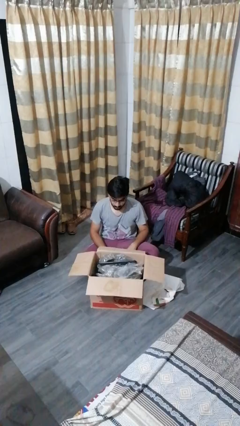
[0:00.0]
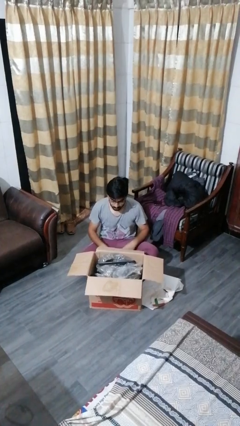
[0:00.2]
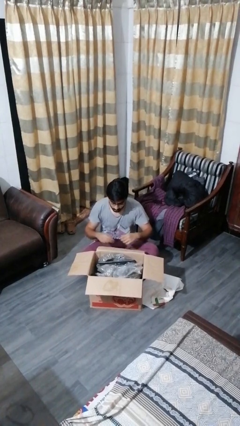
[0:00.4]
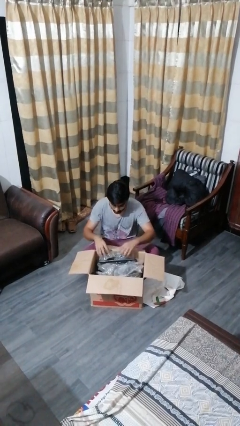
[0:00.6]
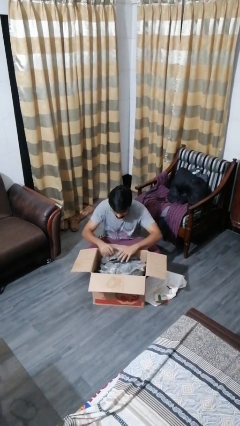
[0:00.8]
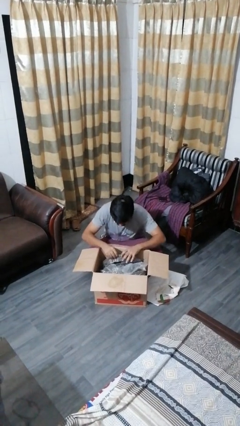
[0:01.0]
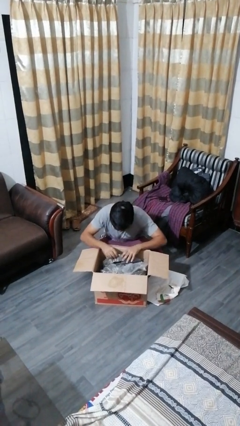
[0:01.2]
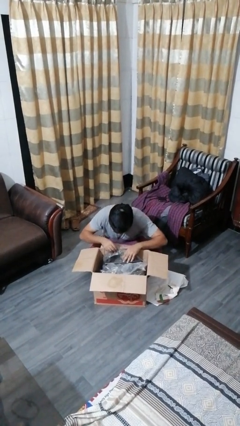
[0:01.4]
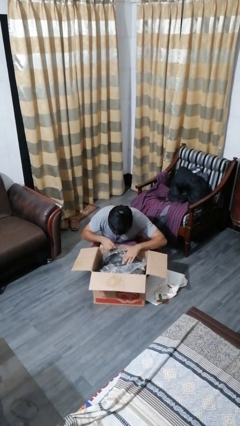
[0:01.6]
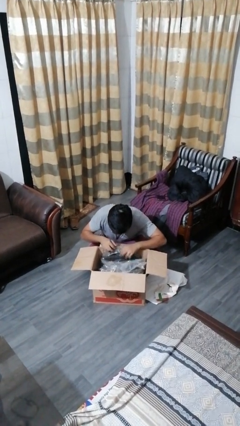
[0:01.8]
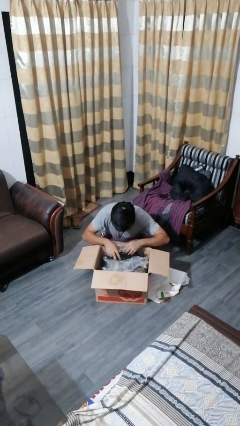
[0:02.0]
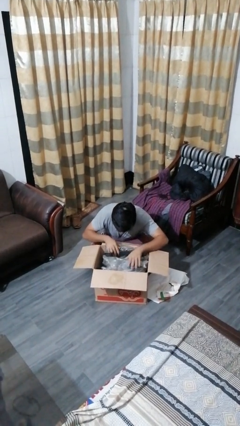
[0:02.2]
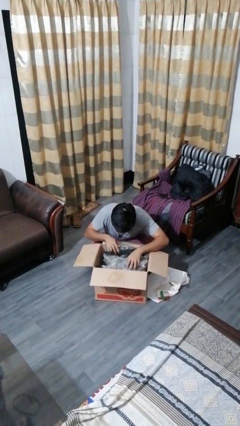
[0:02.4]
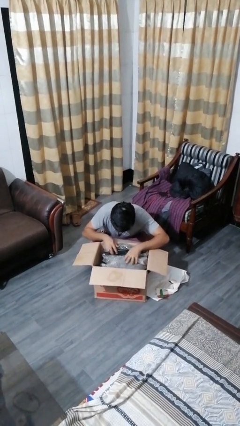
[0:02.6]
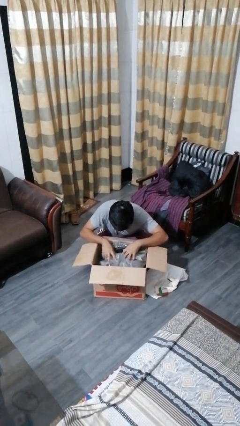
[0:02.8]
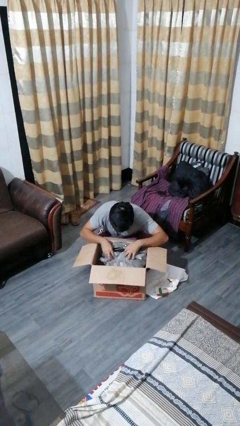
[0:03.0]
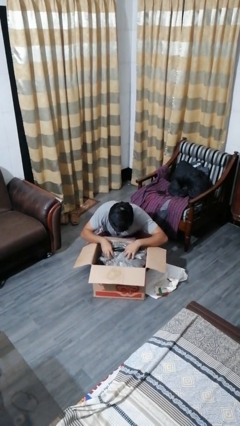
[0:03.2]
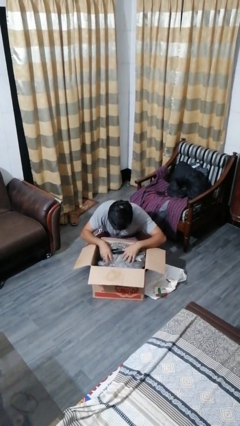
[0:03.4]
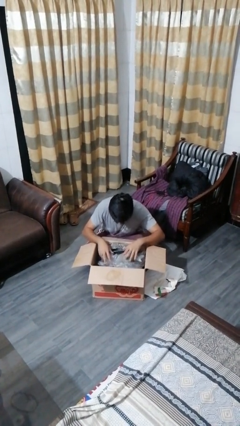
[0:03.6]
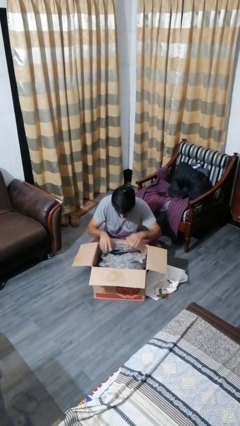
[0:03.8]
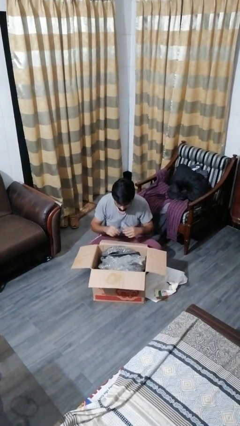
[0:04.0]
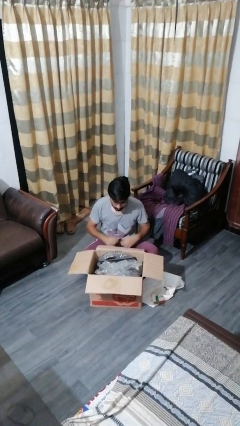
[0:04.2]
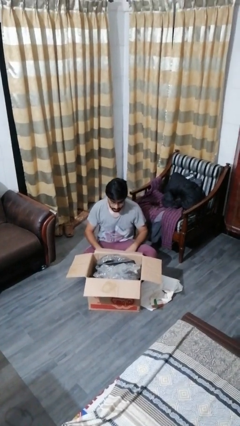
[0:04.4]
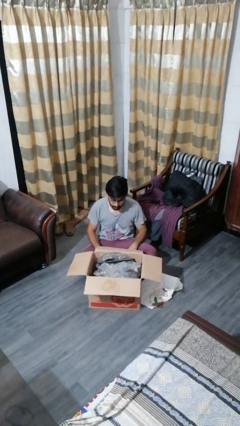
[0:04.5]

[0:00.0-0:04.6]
person searches in box

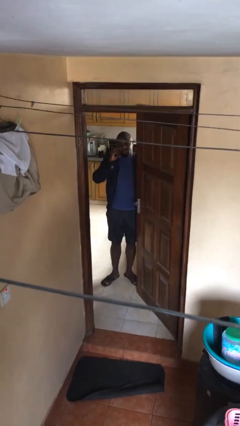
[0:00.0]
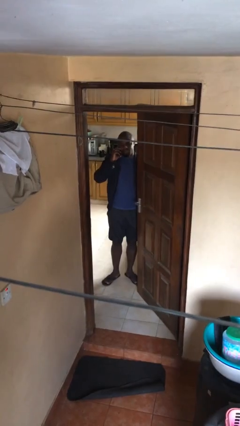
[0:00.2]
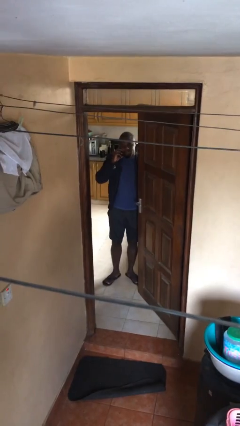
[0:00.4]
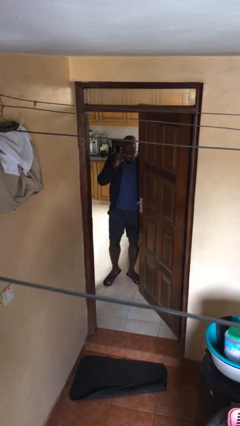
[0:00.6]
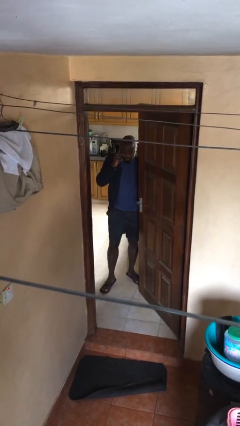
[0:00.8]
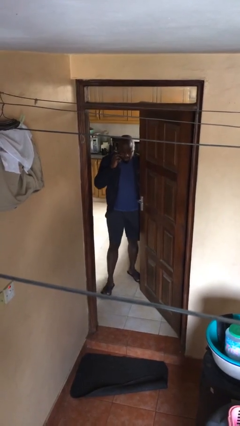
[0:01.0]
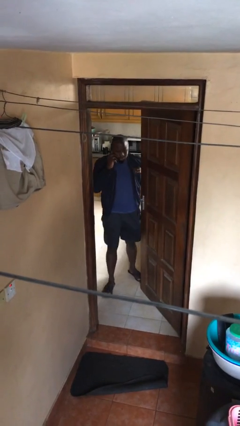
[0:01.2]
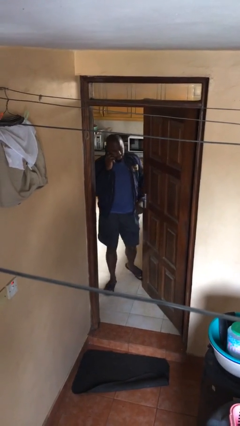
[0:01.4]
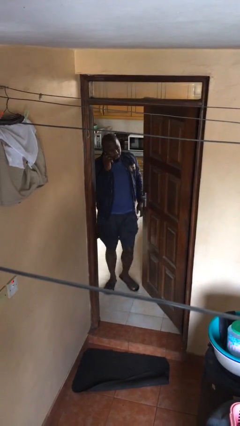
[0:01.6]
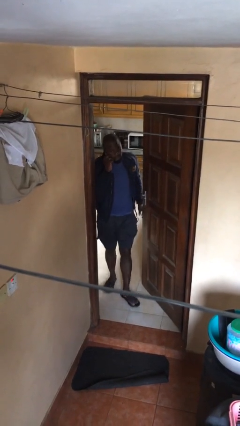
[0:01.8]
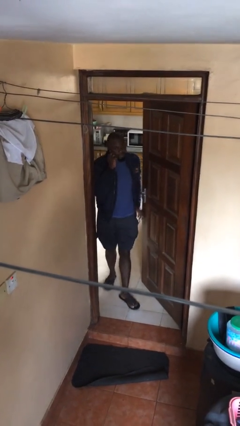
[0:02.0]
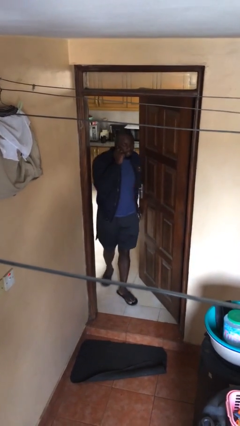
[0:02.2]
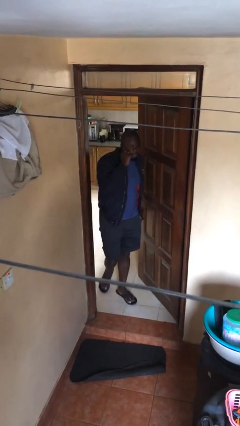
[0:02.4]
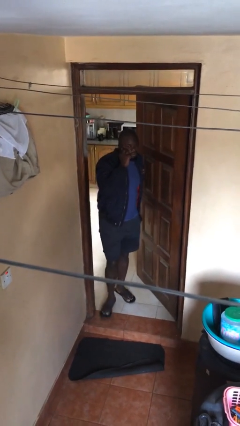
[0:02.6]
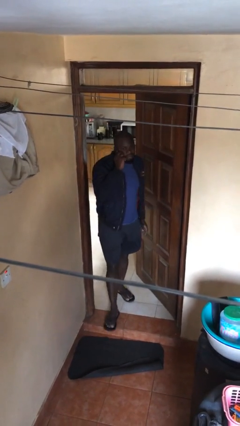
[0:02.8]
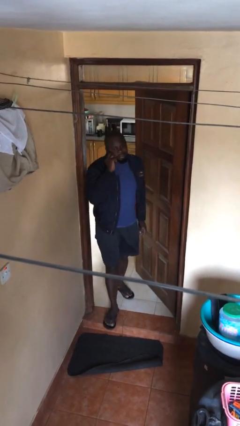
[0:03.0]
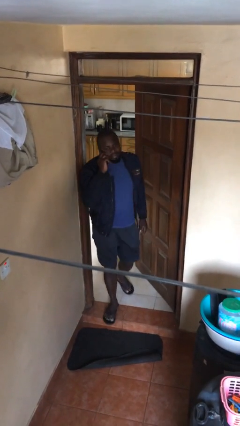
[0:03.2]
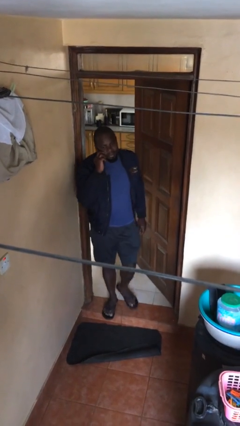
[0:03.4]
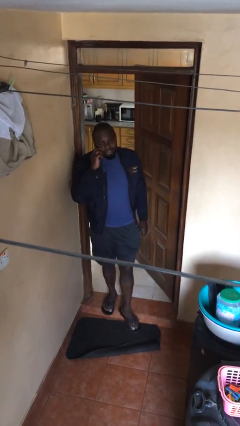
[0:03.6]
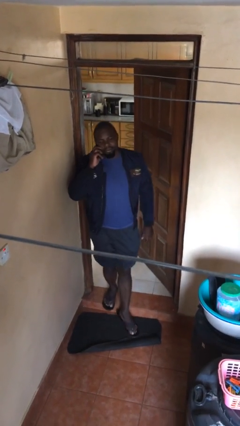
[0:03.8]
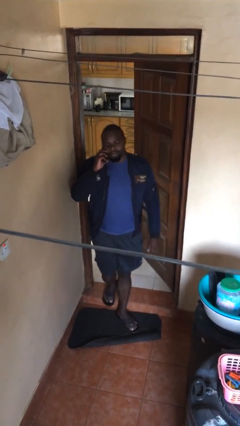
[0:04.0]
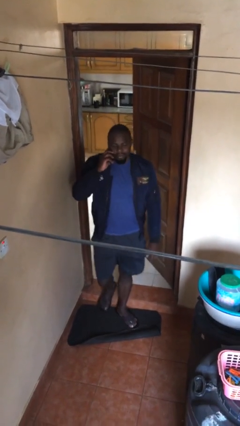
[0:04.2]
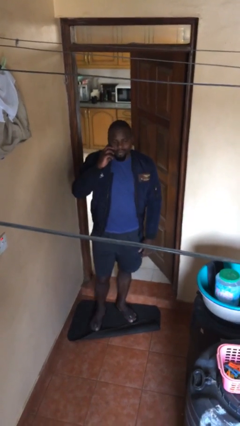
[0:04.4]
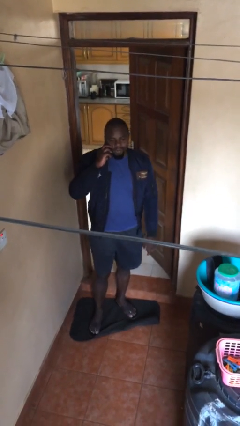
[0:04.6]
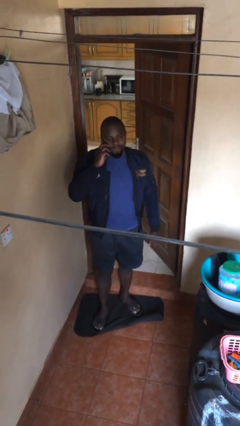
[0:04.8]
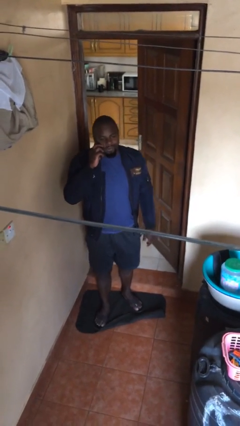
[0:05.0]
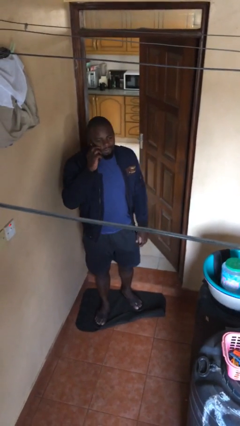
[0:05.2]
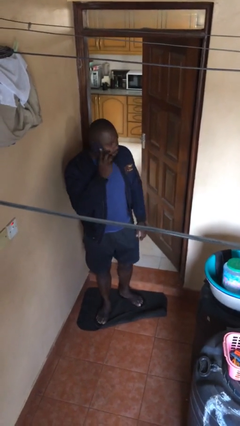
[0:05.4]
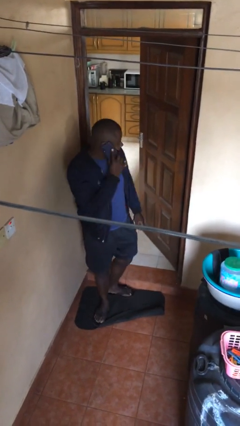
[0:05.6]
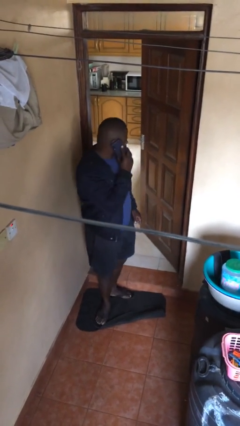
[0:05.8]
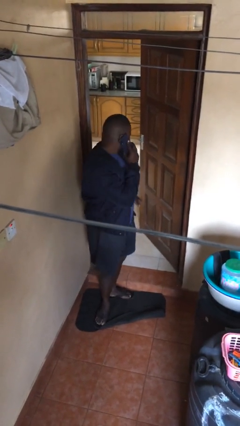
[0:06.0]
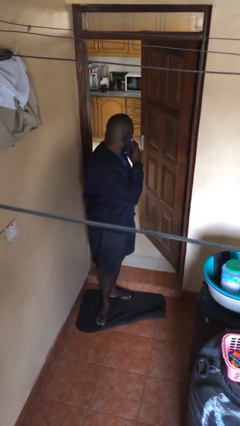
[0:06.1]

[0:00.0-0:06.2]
person enters scene through structure

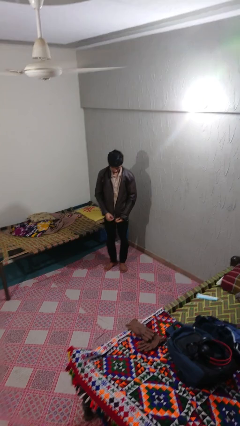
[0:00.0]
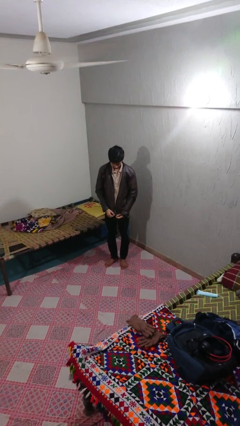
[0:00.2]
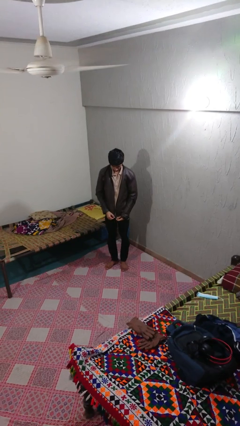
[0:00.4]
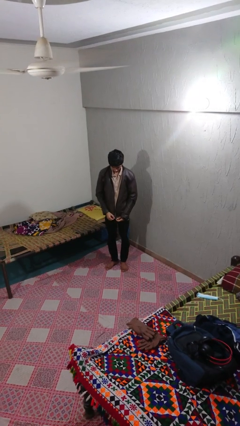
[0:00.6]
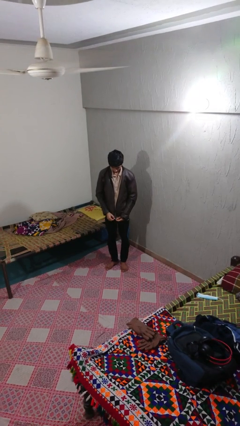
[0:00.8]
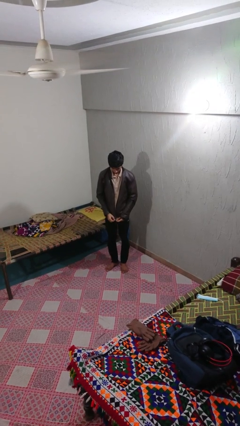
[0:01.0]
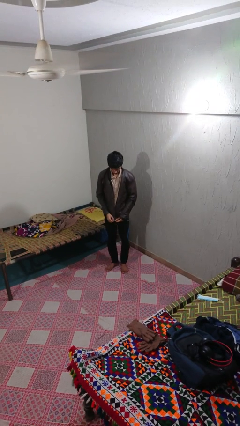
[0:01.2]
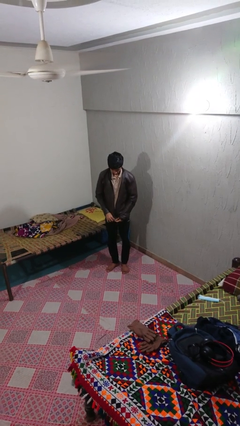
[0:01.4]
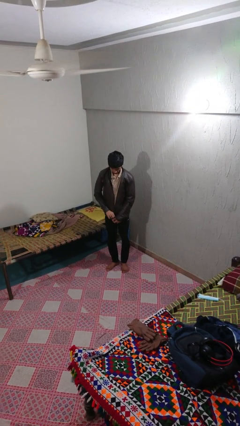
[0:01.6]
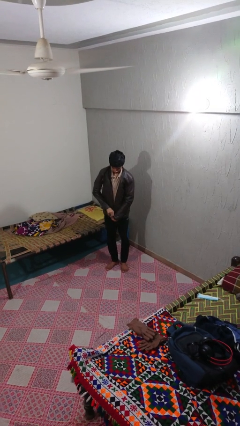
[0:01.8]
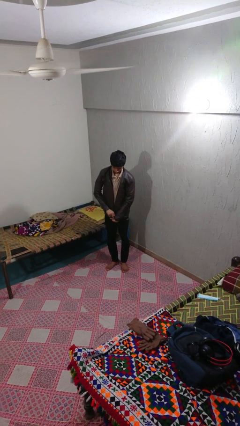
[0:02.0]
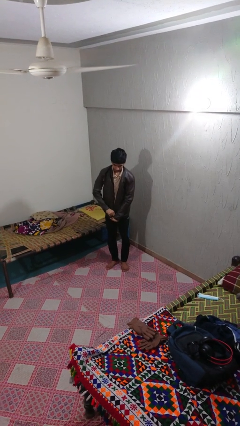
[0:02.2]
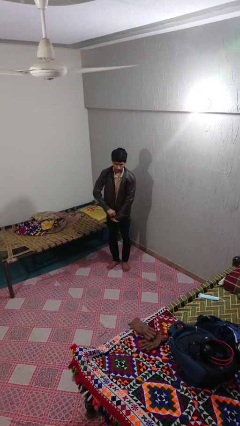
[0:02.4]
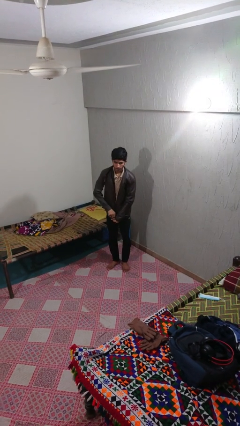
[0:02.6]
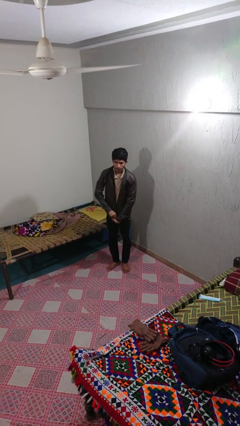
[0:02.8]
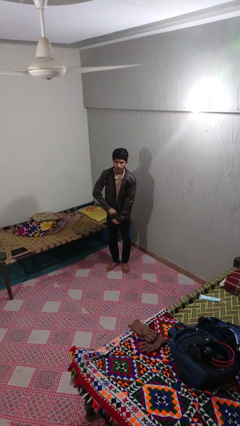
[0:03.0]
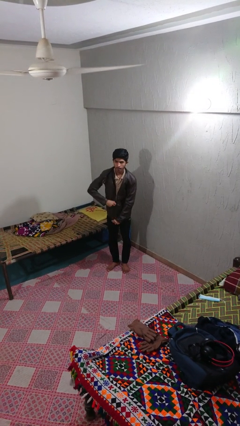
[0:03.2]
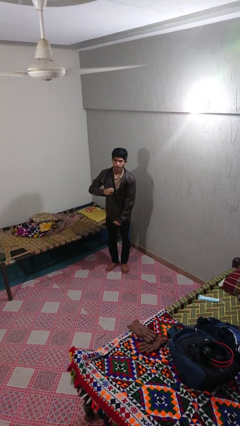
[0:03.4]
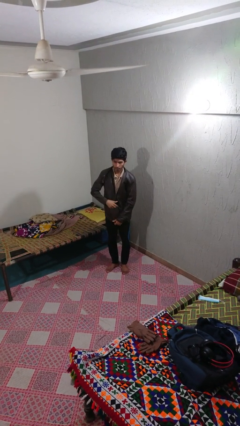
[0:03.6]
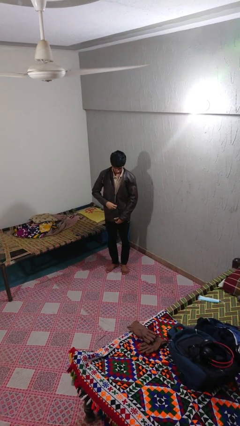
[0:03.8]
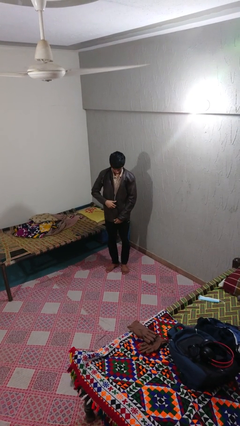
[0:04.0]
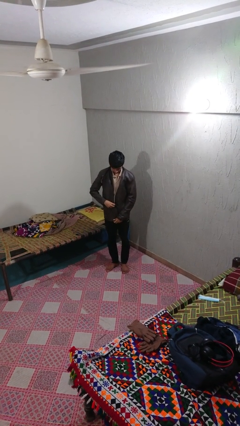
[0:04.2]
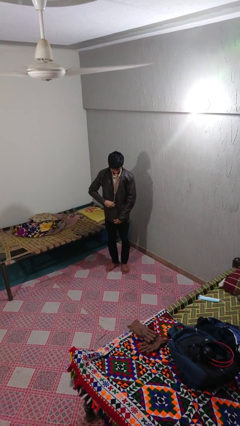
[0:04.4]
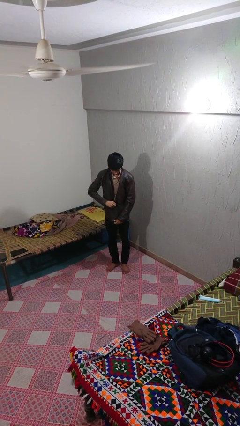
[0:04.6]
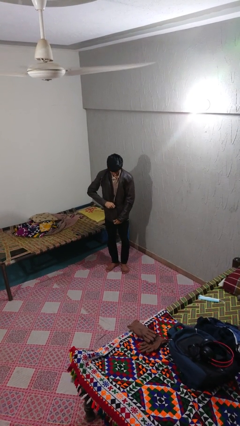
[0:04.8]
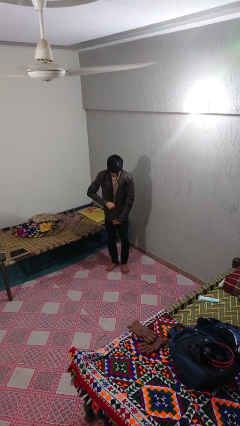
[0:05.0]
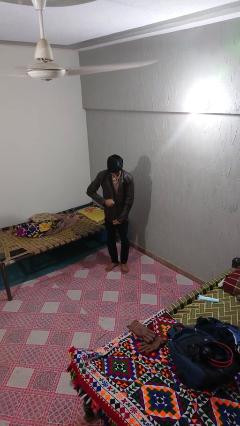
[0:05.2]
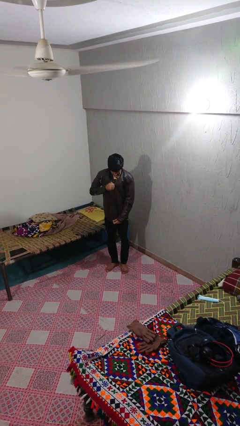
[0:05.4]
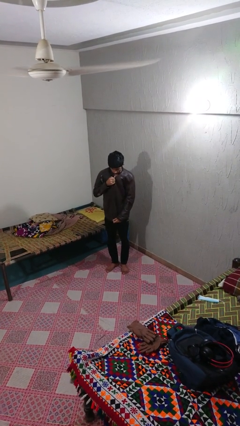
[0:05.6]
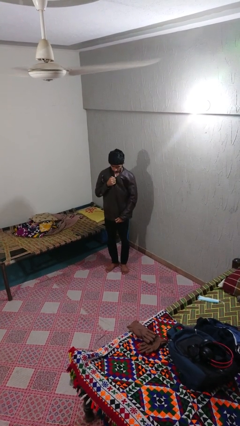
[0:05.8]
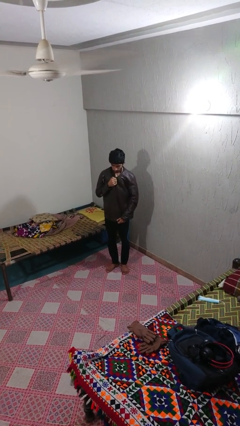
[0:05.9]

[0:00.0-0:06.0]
person zips up jacket

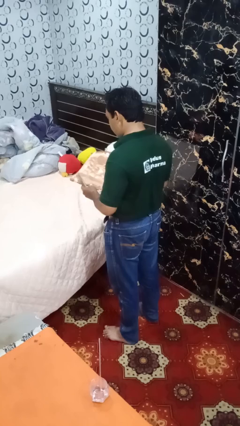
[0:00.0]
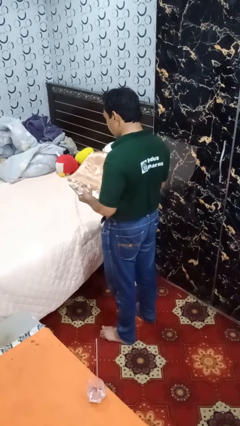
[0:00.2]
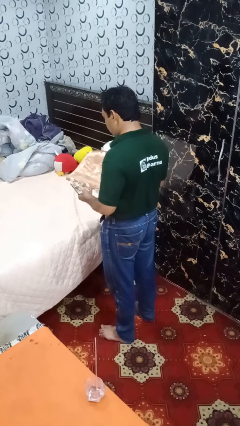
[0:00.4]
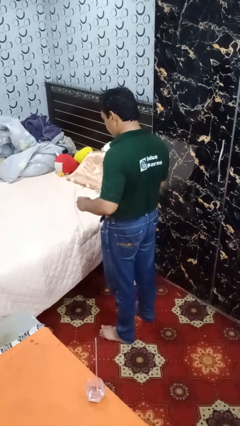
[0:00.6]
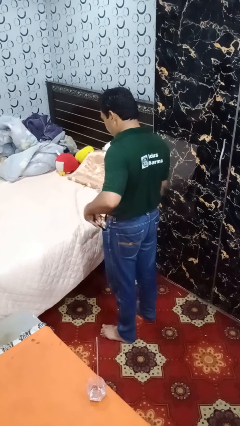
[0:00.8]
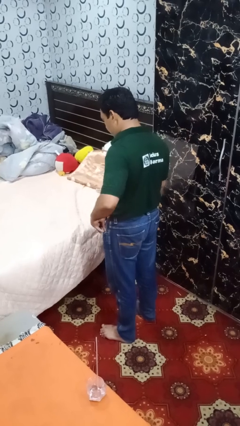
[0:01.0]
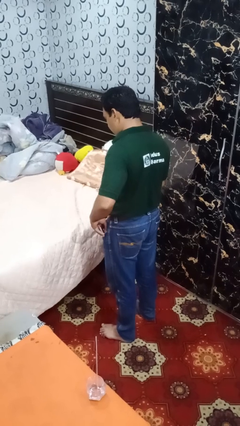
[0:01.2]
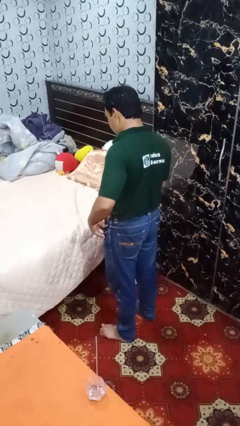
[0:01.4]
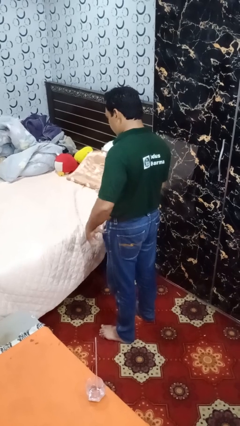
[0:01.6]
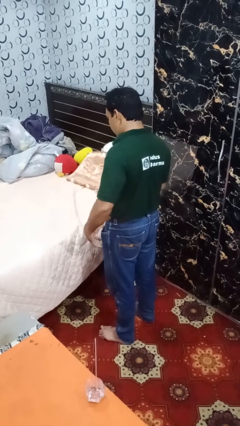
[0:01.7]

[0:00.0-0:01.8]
person puts phone into pocket
